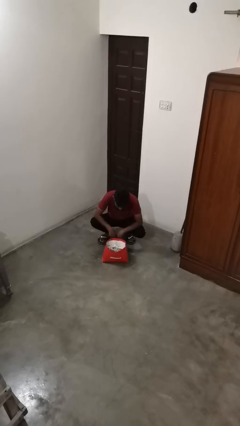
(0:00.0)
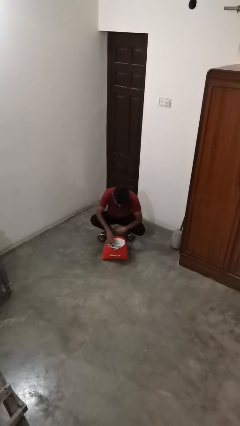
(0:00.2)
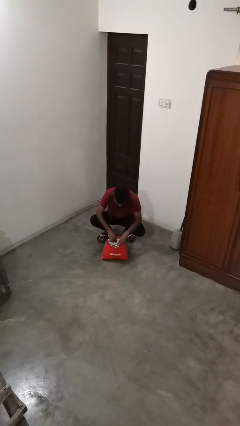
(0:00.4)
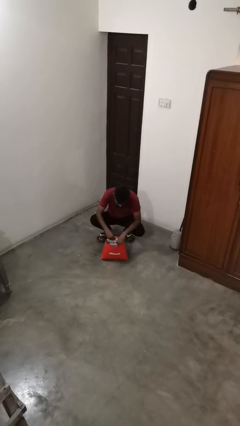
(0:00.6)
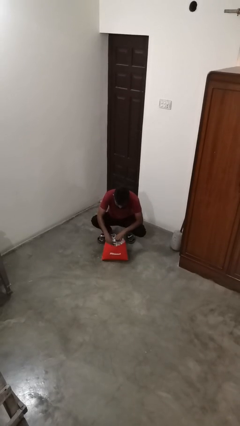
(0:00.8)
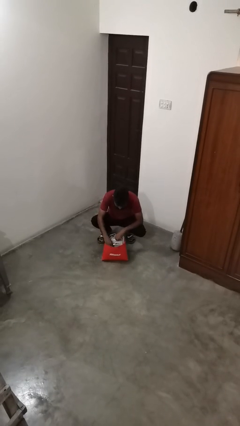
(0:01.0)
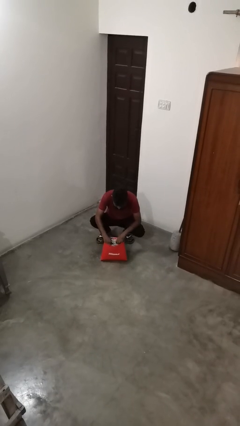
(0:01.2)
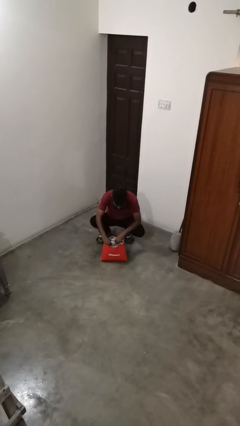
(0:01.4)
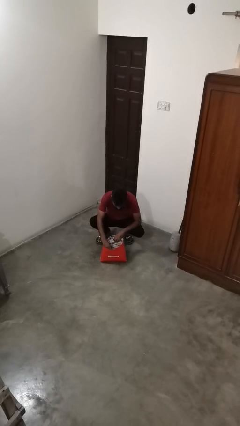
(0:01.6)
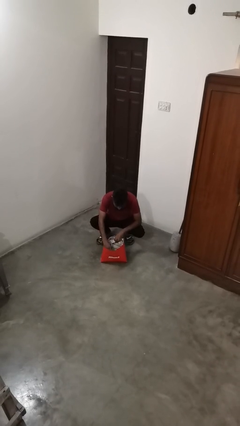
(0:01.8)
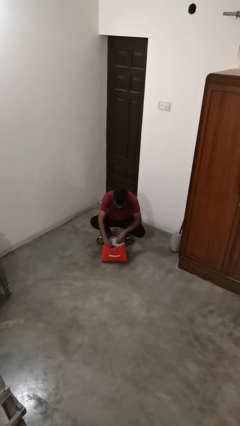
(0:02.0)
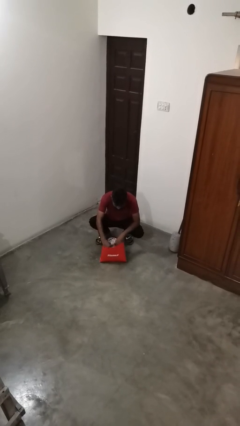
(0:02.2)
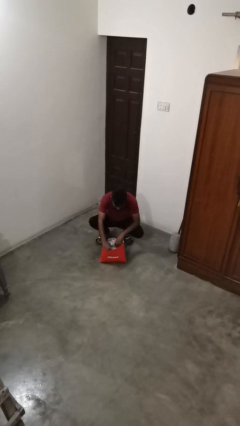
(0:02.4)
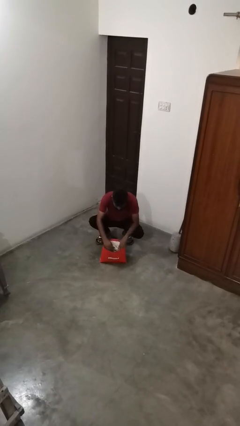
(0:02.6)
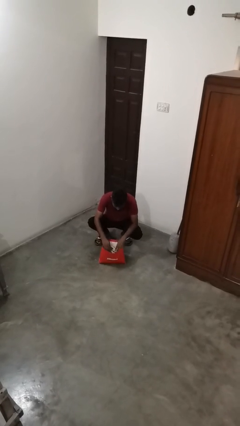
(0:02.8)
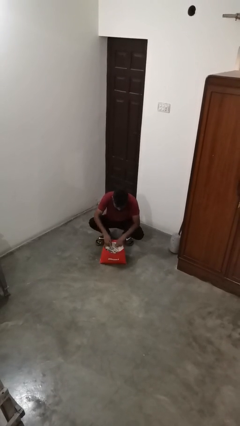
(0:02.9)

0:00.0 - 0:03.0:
person searches in bag

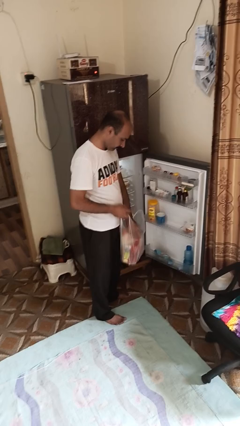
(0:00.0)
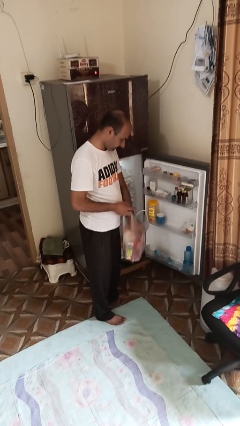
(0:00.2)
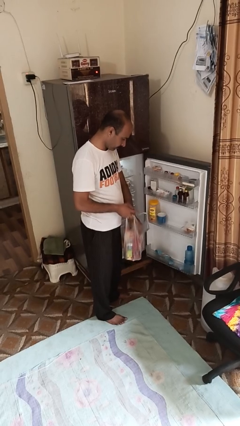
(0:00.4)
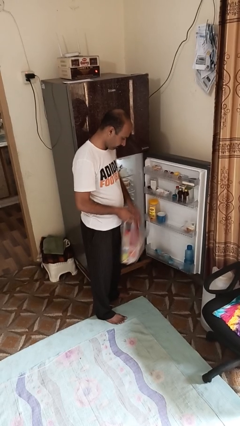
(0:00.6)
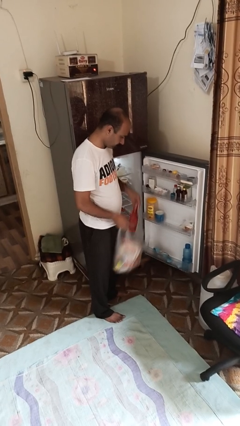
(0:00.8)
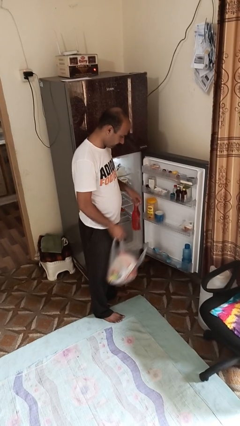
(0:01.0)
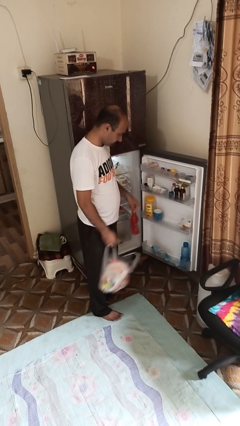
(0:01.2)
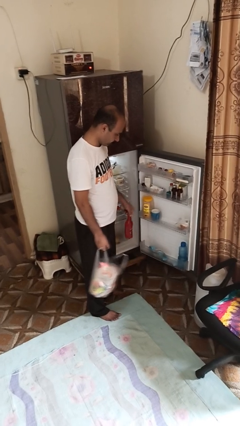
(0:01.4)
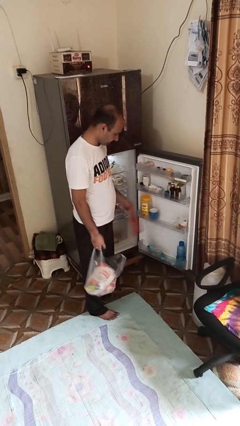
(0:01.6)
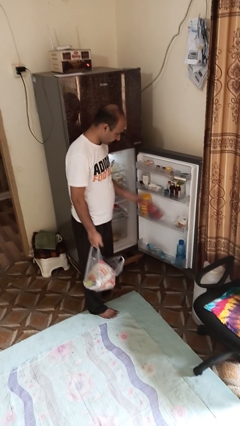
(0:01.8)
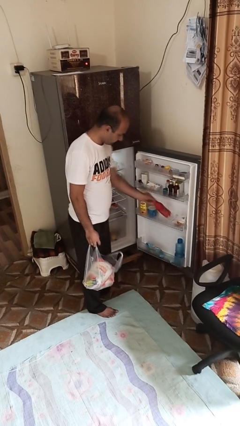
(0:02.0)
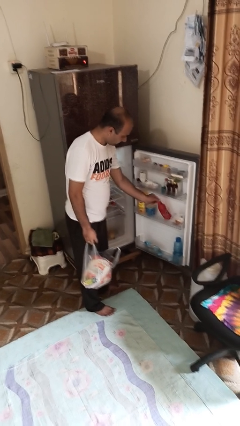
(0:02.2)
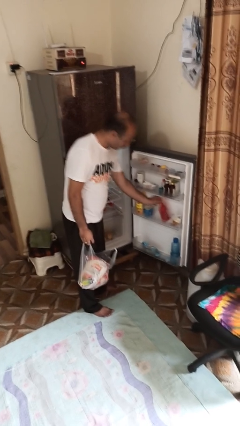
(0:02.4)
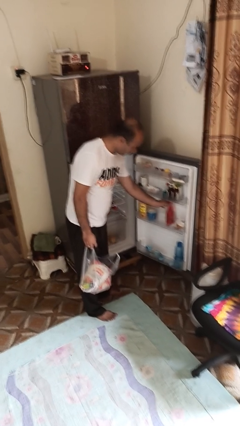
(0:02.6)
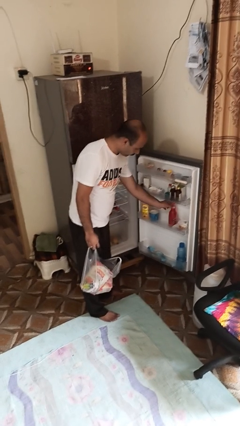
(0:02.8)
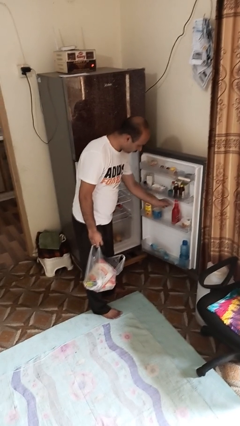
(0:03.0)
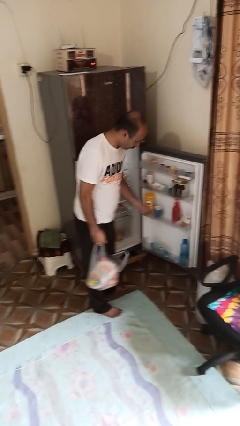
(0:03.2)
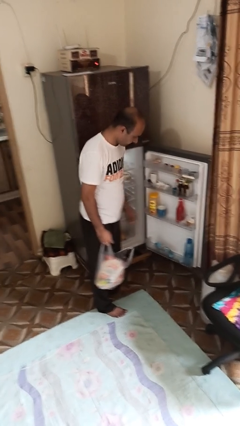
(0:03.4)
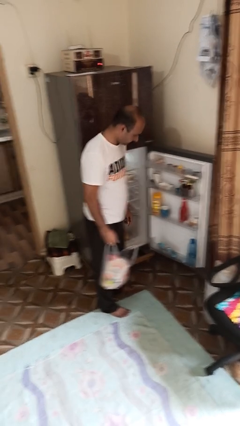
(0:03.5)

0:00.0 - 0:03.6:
person loads groceries into refrigerator

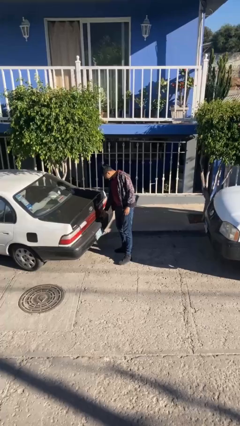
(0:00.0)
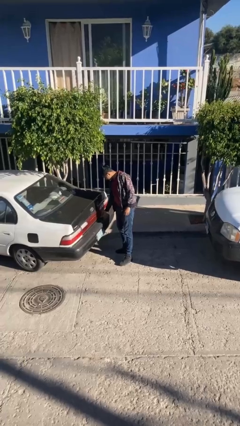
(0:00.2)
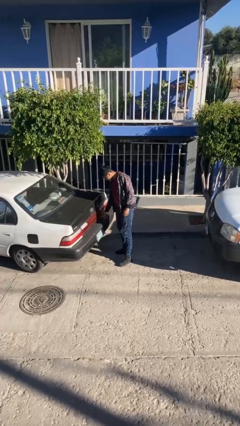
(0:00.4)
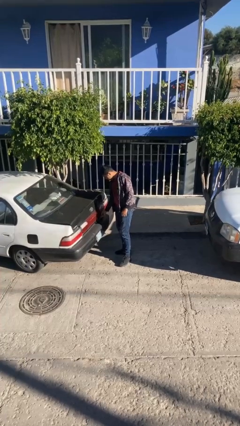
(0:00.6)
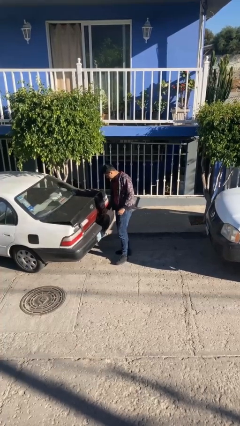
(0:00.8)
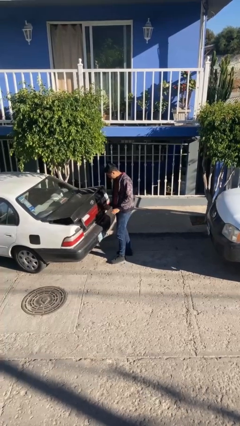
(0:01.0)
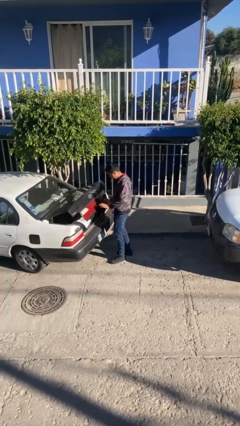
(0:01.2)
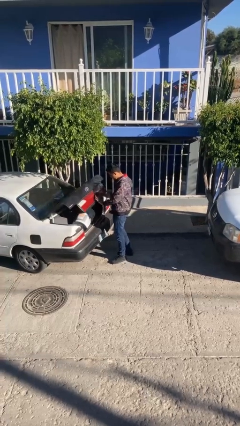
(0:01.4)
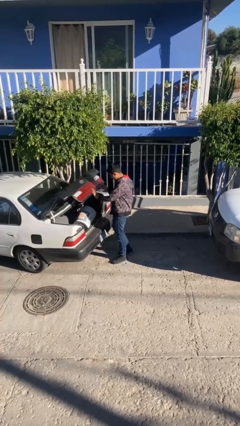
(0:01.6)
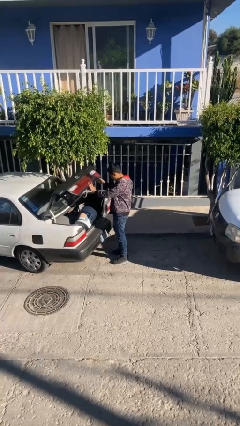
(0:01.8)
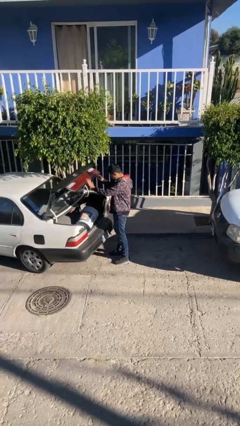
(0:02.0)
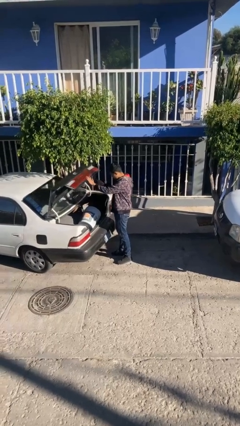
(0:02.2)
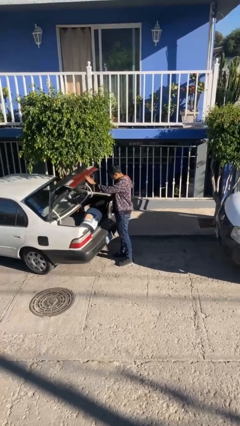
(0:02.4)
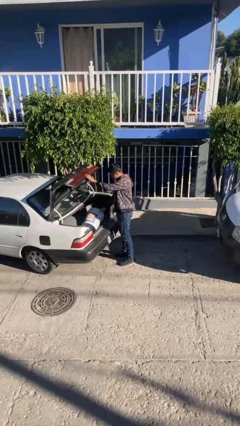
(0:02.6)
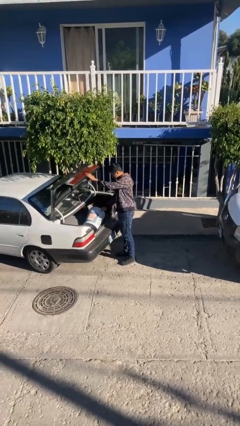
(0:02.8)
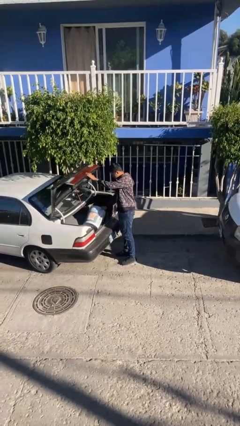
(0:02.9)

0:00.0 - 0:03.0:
person opens car trunk

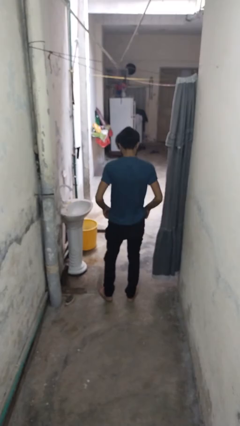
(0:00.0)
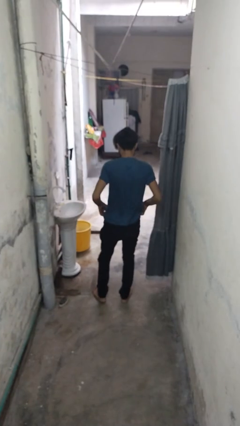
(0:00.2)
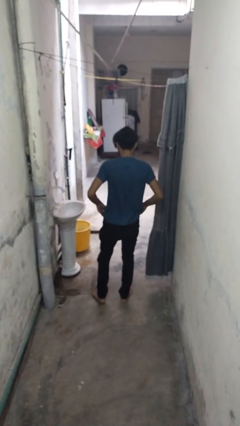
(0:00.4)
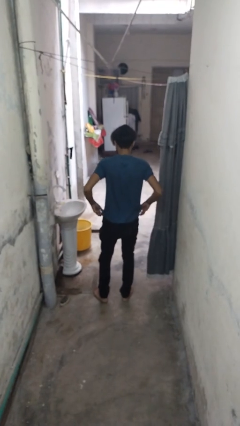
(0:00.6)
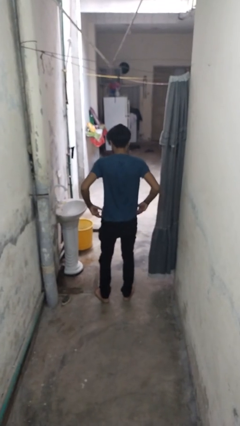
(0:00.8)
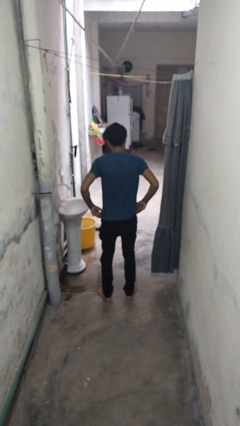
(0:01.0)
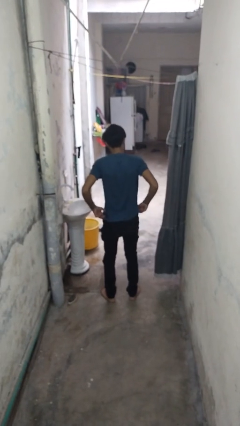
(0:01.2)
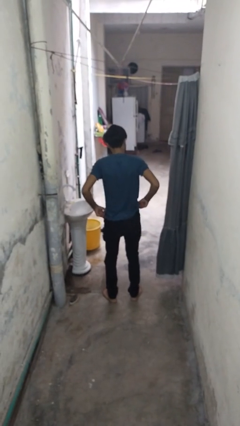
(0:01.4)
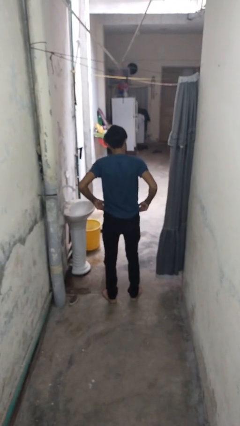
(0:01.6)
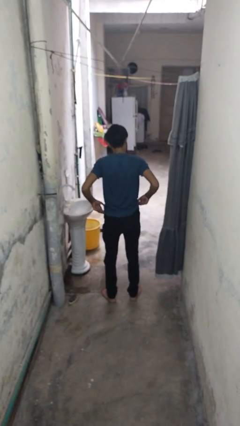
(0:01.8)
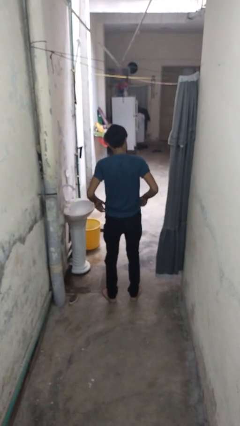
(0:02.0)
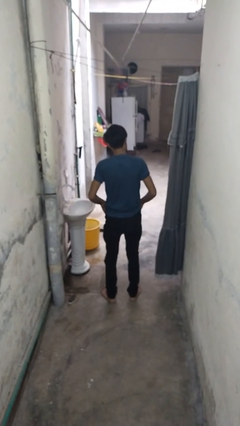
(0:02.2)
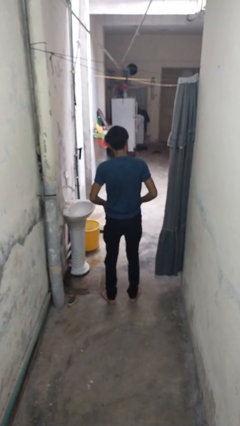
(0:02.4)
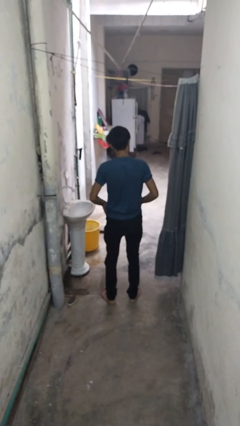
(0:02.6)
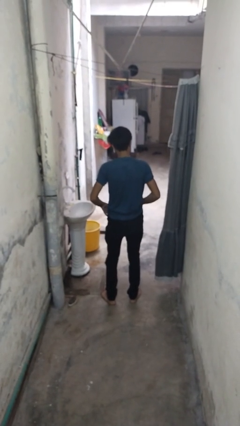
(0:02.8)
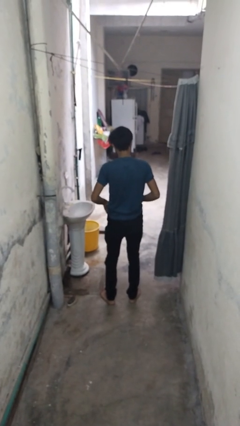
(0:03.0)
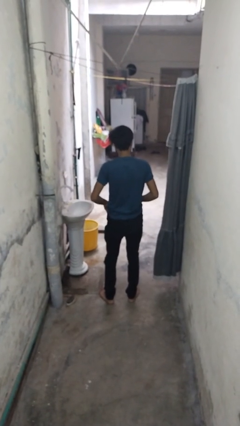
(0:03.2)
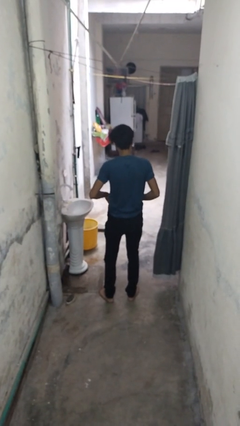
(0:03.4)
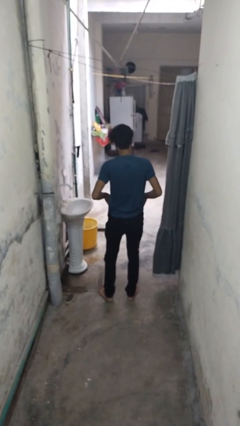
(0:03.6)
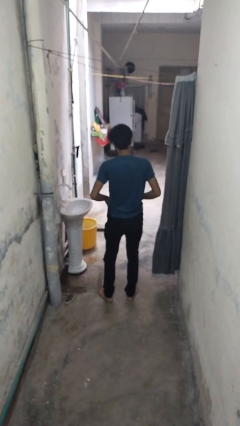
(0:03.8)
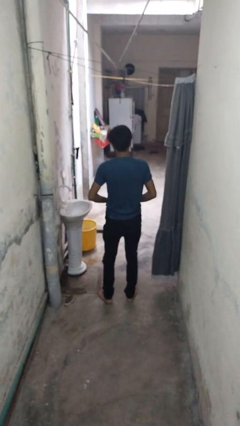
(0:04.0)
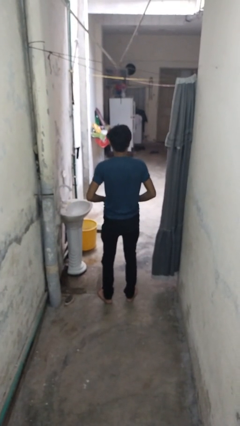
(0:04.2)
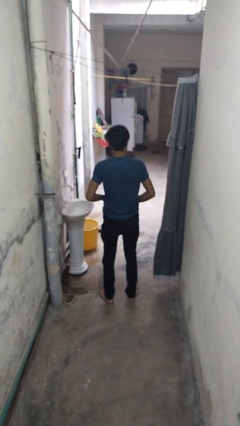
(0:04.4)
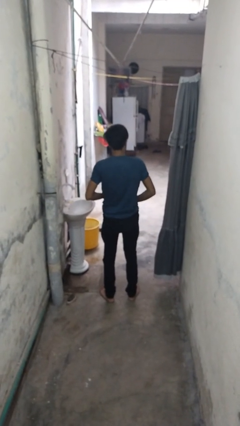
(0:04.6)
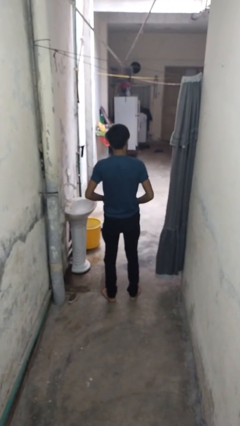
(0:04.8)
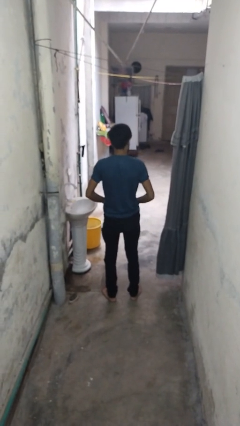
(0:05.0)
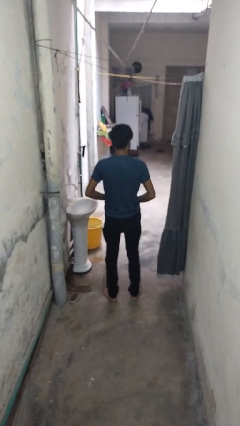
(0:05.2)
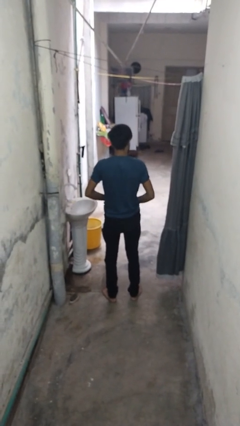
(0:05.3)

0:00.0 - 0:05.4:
person hikes up pants

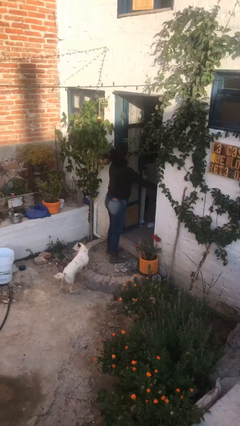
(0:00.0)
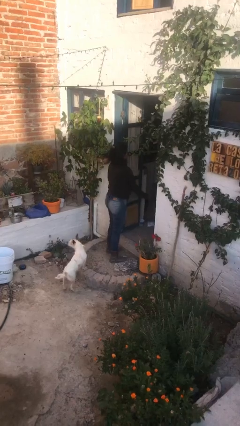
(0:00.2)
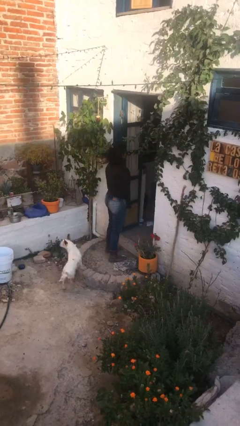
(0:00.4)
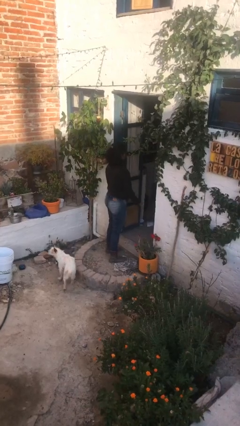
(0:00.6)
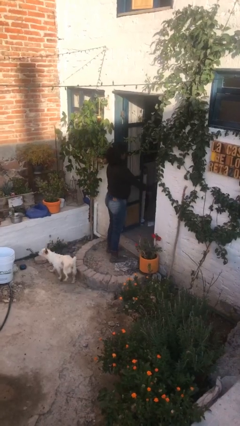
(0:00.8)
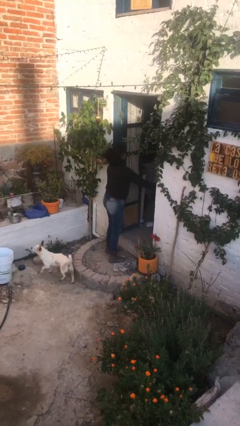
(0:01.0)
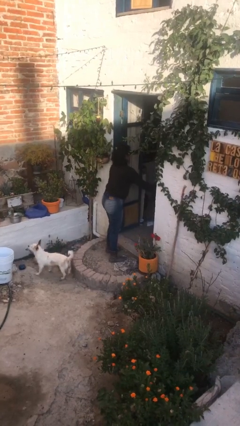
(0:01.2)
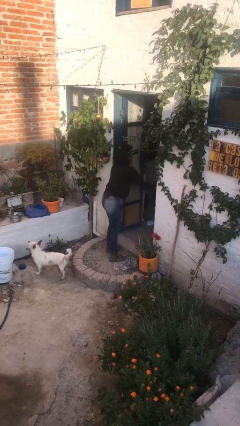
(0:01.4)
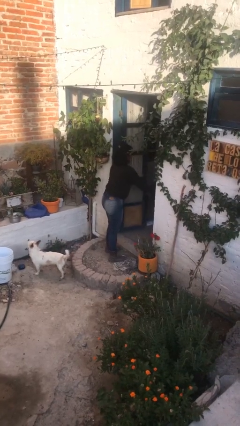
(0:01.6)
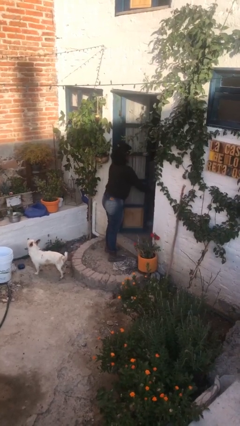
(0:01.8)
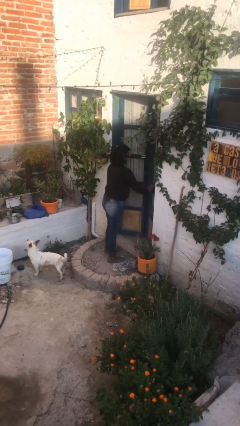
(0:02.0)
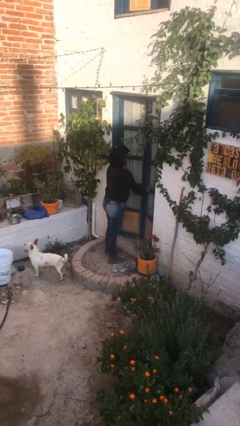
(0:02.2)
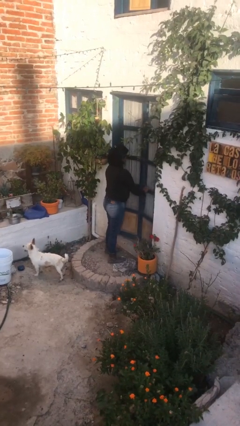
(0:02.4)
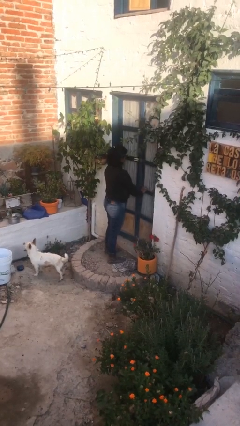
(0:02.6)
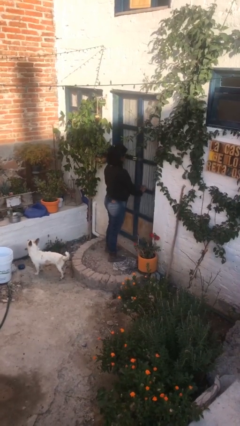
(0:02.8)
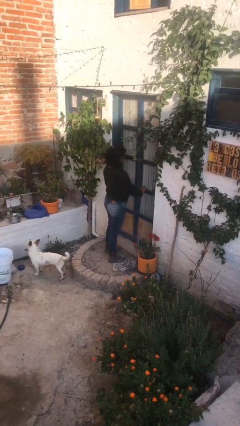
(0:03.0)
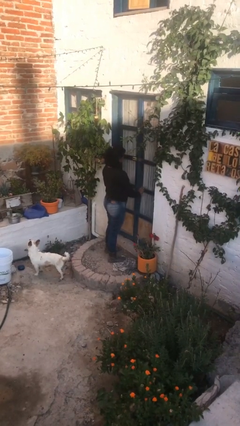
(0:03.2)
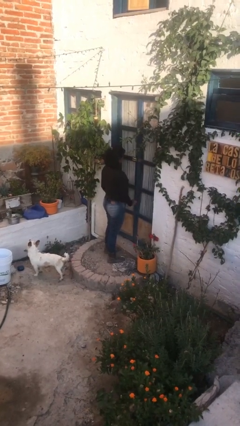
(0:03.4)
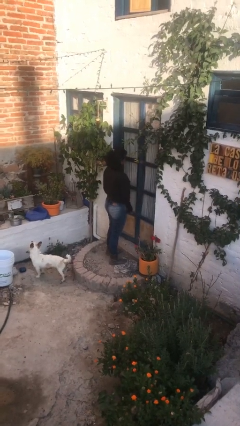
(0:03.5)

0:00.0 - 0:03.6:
person closes facility door
